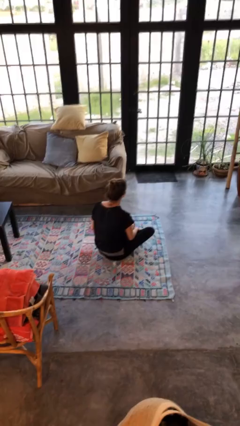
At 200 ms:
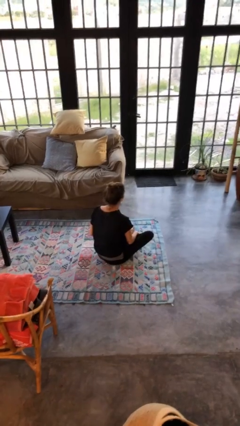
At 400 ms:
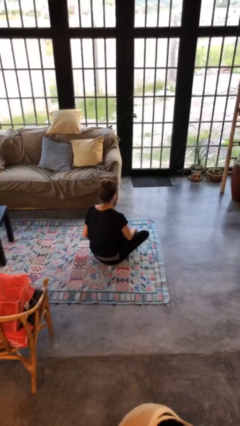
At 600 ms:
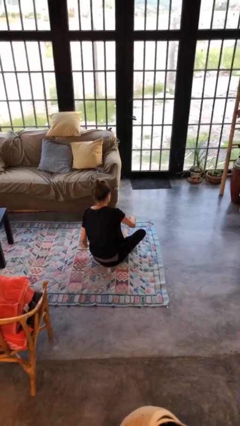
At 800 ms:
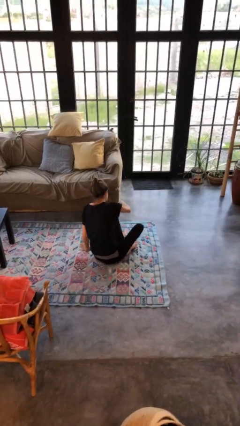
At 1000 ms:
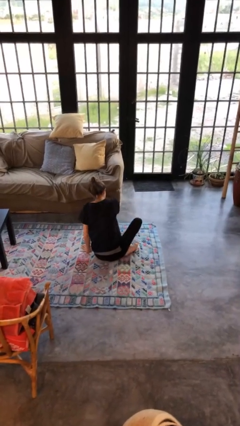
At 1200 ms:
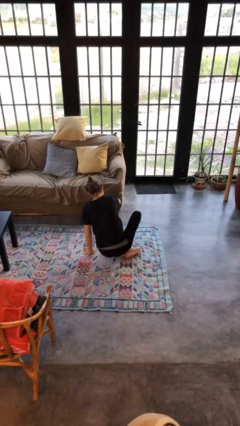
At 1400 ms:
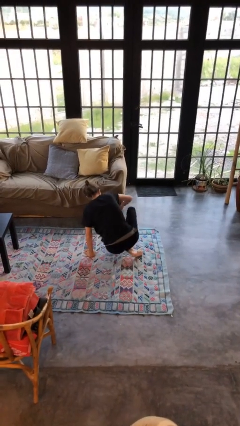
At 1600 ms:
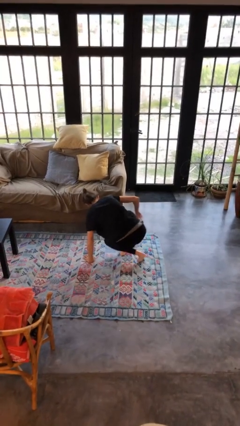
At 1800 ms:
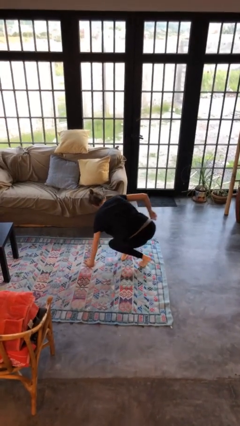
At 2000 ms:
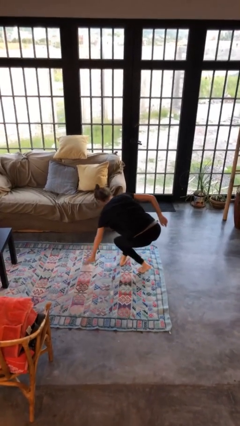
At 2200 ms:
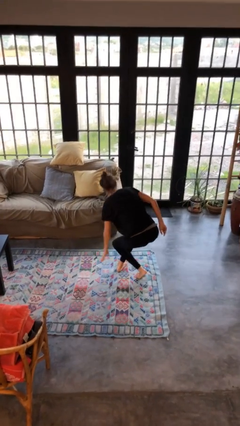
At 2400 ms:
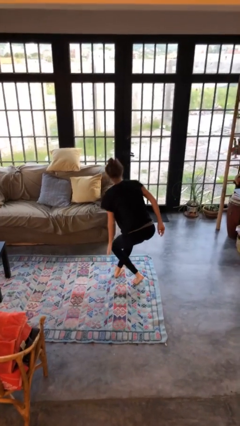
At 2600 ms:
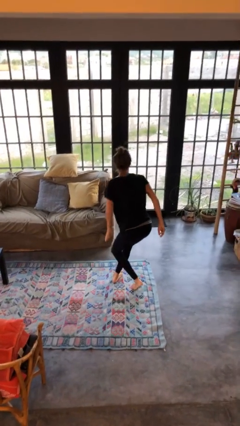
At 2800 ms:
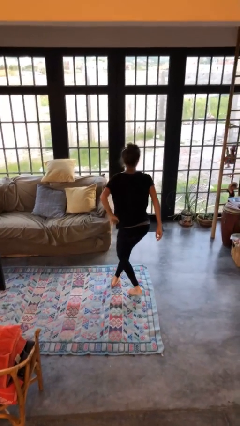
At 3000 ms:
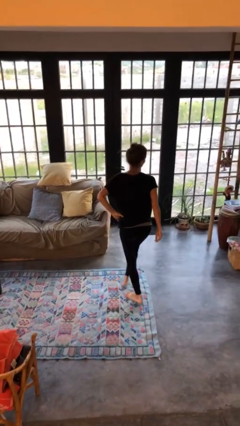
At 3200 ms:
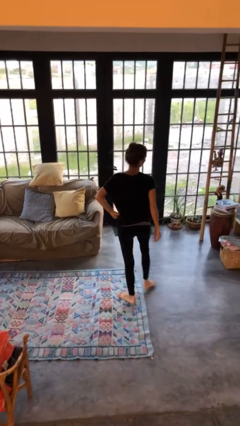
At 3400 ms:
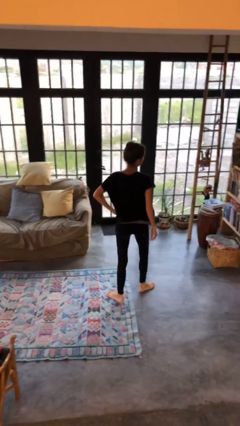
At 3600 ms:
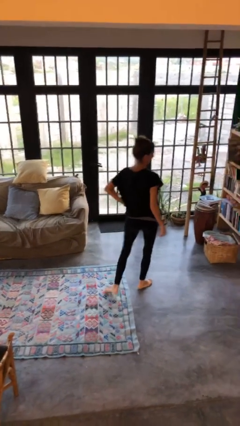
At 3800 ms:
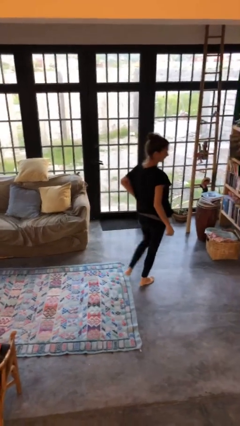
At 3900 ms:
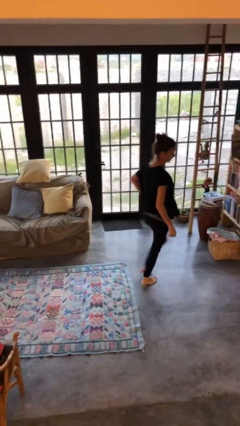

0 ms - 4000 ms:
person stands up from floor

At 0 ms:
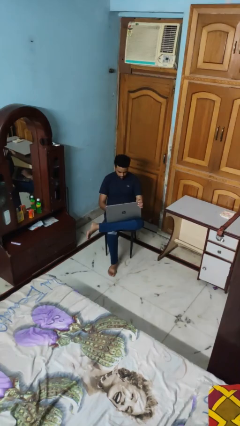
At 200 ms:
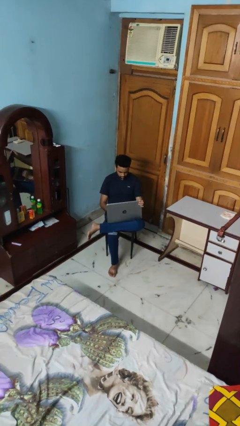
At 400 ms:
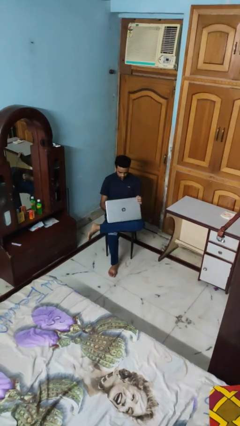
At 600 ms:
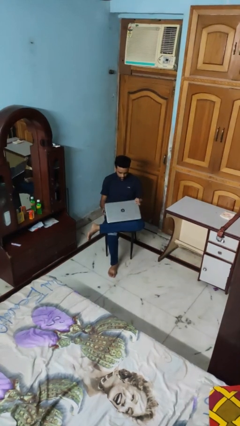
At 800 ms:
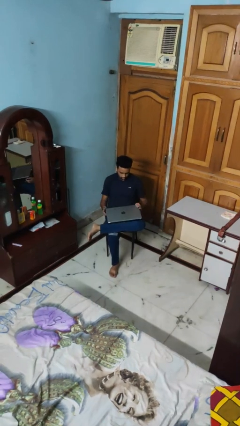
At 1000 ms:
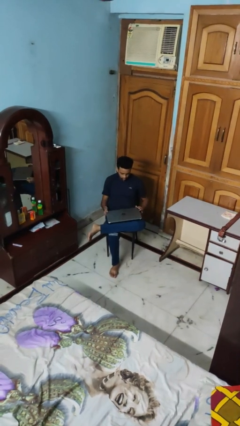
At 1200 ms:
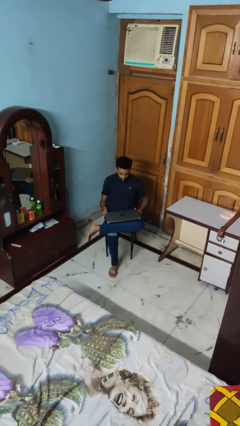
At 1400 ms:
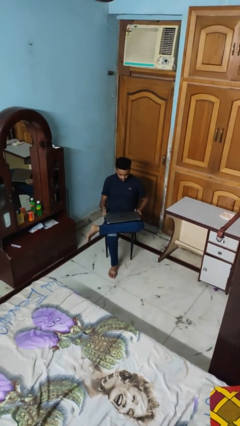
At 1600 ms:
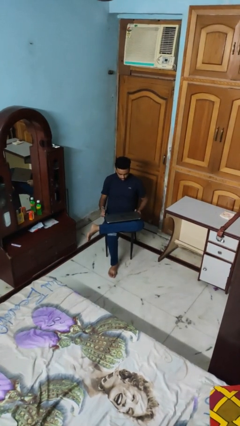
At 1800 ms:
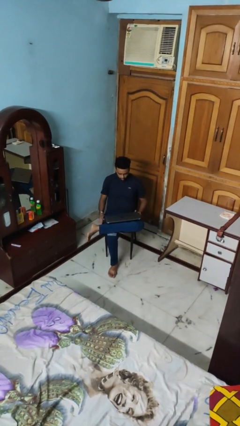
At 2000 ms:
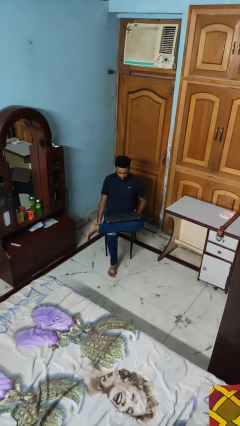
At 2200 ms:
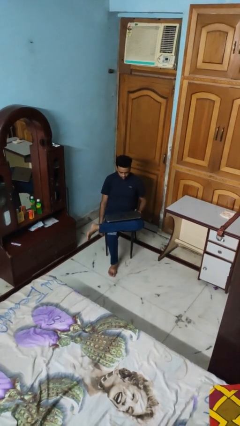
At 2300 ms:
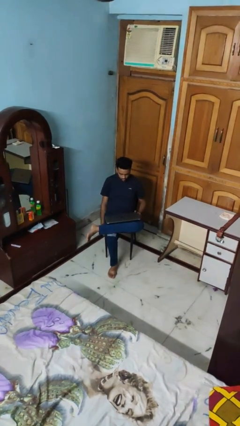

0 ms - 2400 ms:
person closes laptop

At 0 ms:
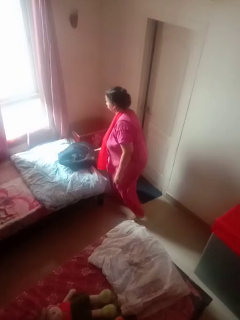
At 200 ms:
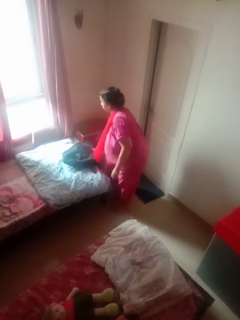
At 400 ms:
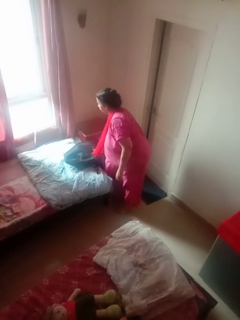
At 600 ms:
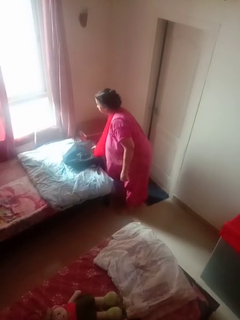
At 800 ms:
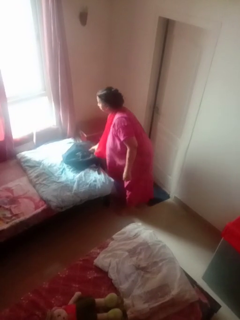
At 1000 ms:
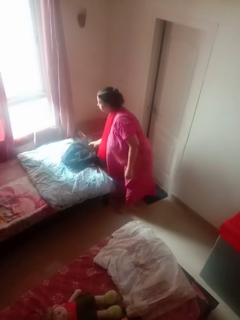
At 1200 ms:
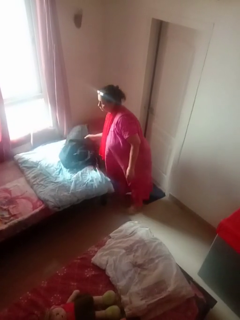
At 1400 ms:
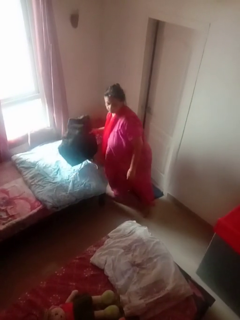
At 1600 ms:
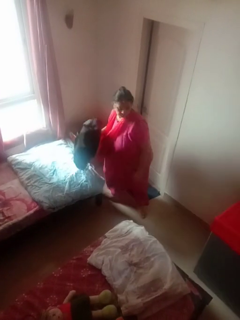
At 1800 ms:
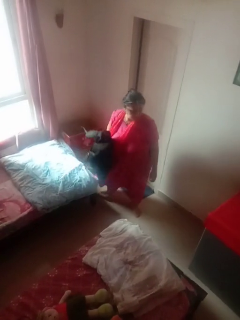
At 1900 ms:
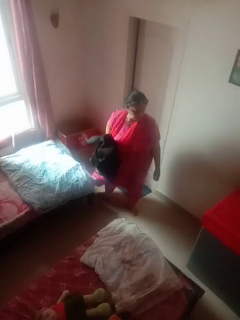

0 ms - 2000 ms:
person picks up object from bed

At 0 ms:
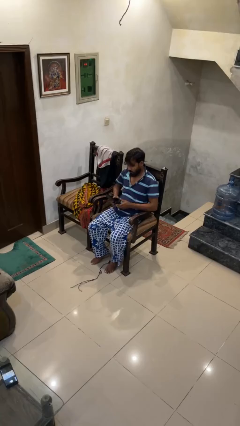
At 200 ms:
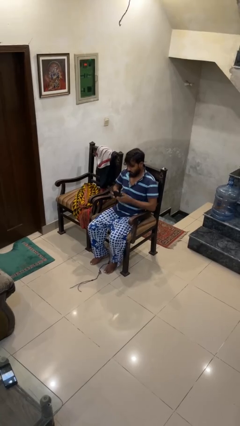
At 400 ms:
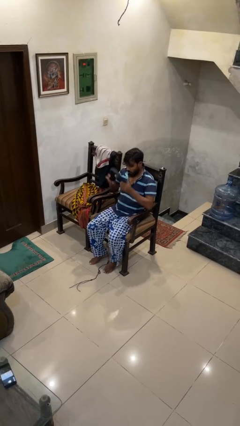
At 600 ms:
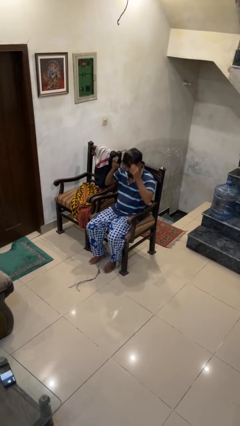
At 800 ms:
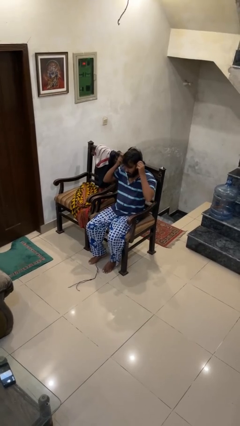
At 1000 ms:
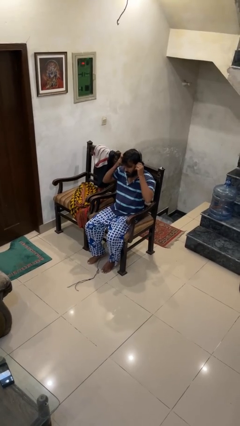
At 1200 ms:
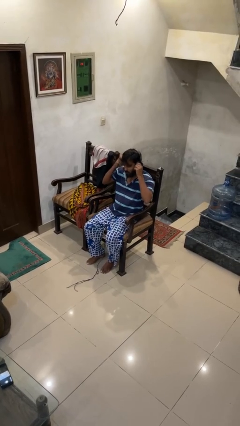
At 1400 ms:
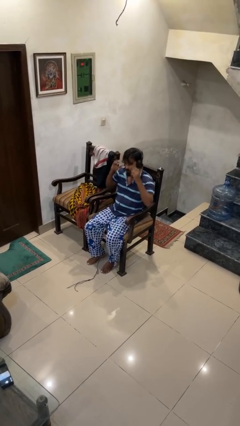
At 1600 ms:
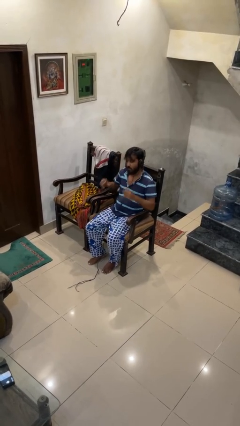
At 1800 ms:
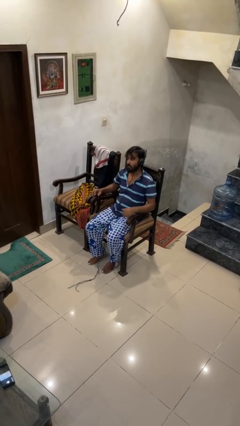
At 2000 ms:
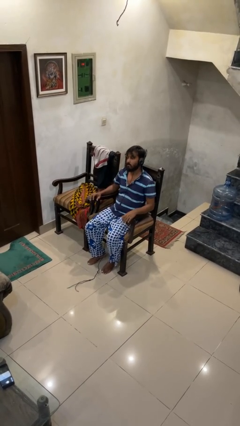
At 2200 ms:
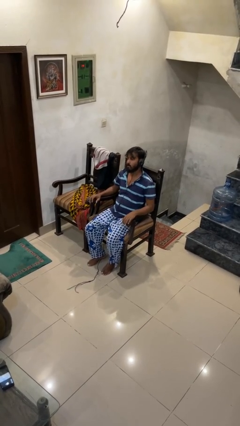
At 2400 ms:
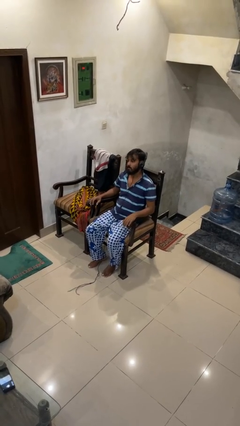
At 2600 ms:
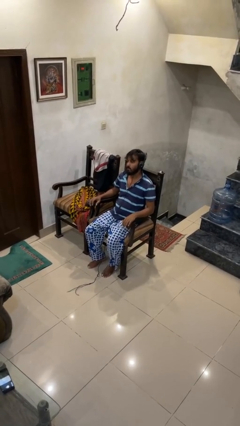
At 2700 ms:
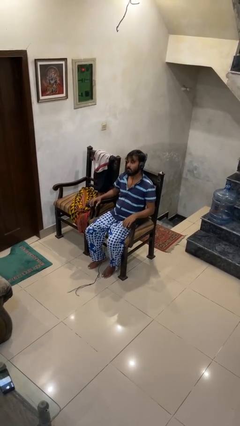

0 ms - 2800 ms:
person puts on headphones

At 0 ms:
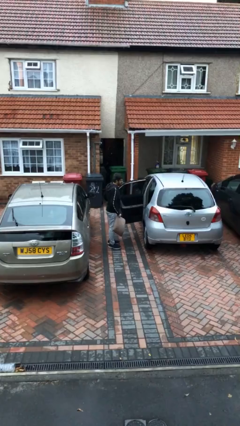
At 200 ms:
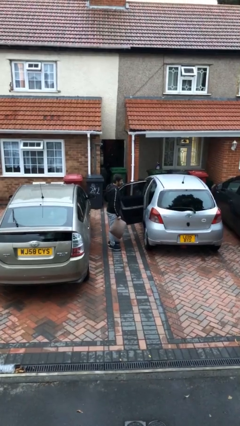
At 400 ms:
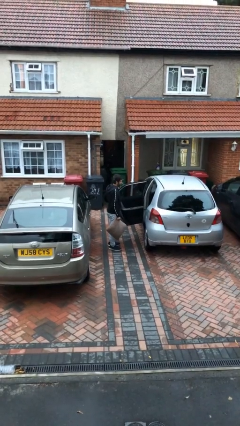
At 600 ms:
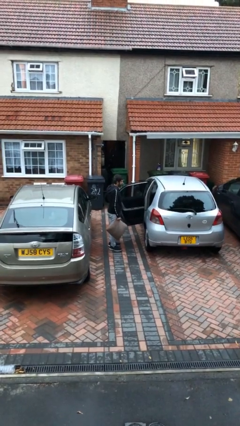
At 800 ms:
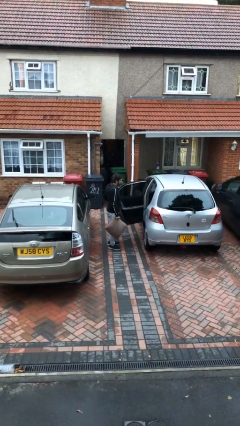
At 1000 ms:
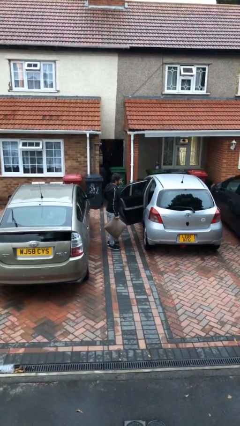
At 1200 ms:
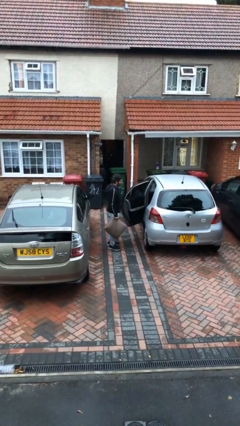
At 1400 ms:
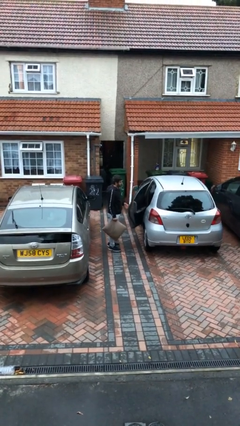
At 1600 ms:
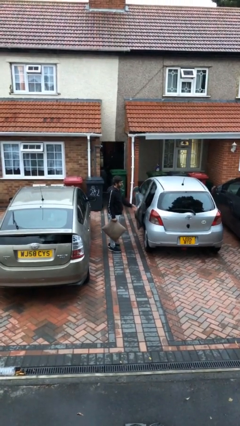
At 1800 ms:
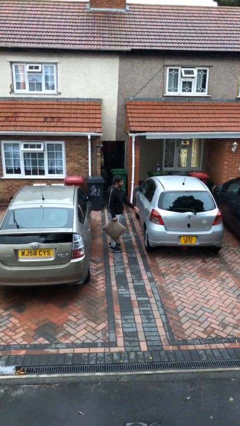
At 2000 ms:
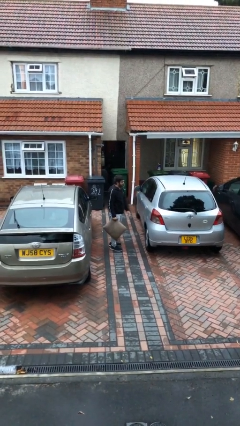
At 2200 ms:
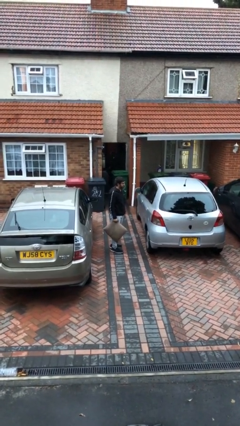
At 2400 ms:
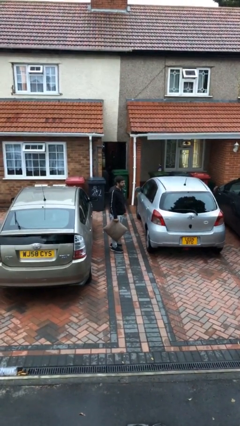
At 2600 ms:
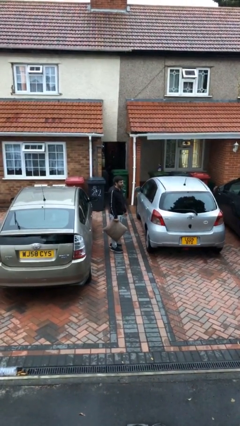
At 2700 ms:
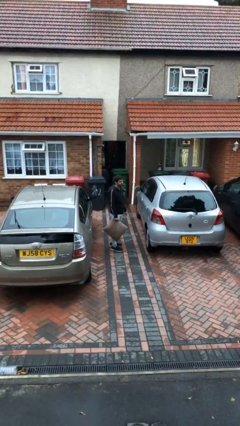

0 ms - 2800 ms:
person closes car door

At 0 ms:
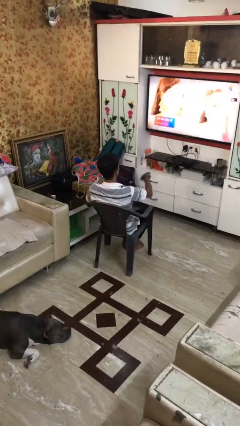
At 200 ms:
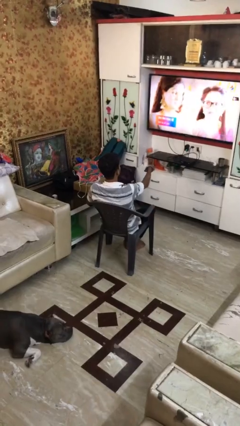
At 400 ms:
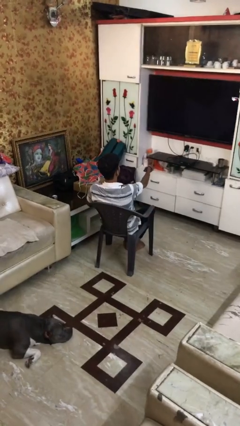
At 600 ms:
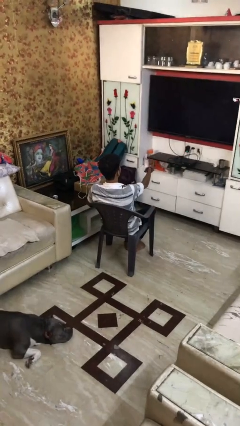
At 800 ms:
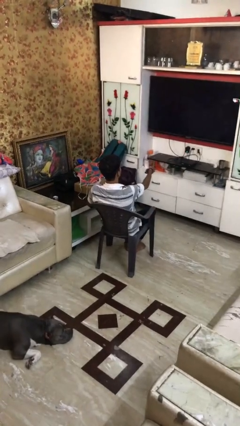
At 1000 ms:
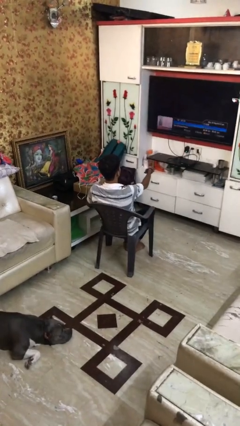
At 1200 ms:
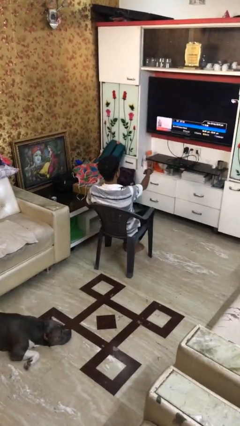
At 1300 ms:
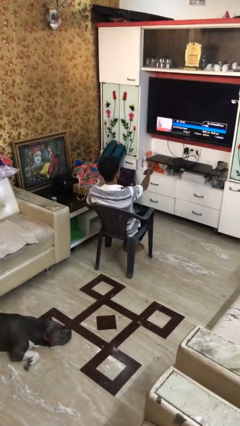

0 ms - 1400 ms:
person uses television remote

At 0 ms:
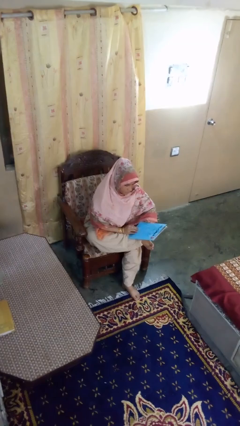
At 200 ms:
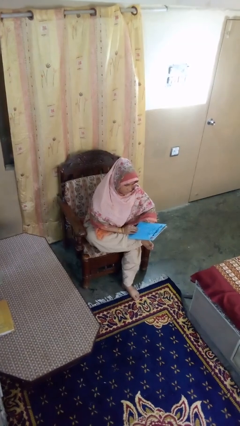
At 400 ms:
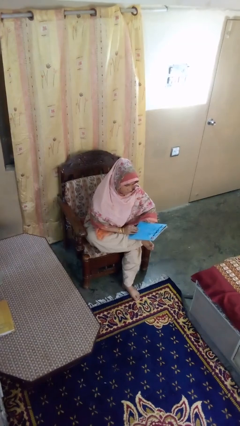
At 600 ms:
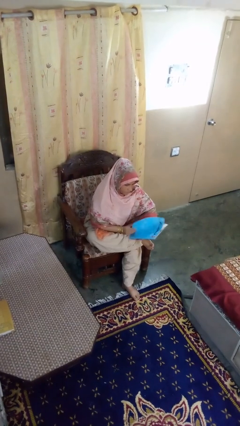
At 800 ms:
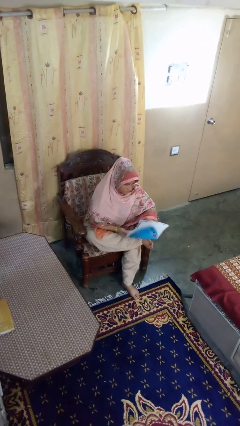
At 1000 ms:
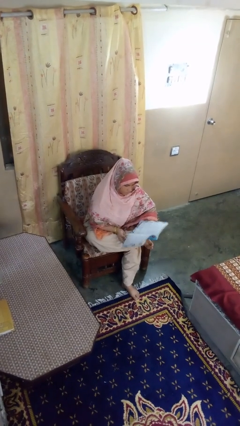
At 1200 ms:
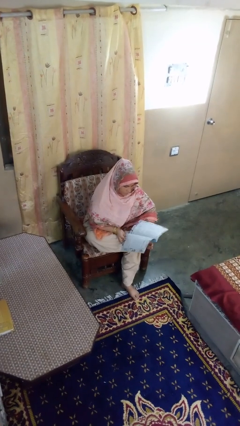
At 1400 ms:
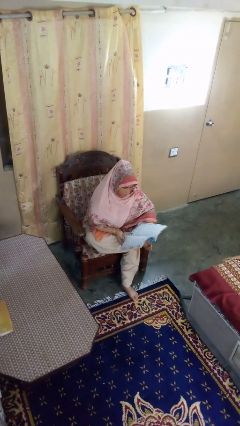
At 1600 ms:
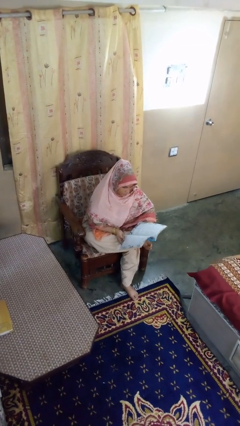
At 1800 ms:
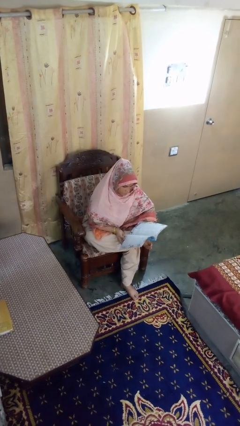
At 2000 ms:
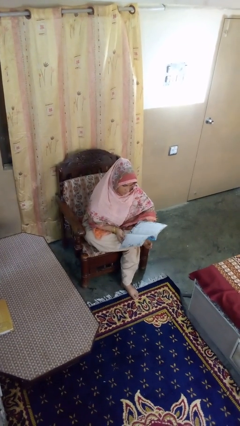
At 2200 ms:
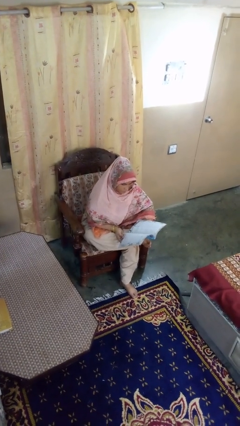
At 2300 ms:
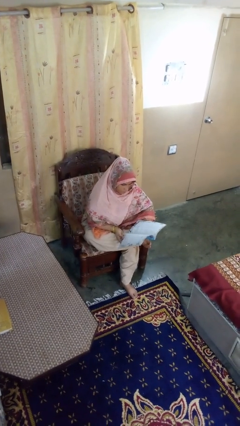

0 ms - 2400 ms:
person reads magazine
